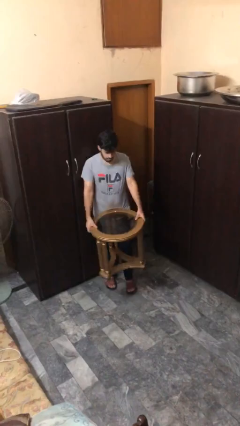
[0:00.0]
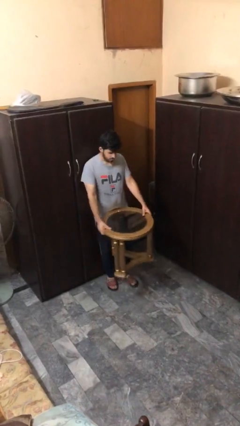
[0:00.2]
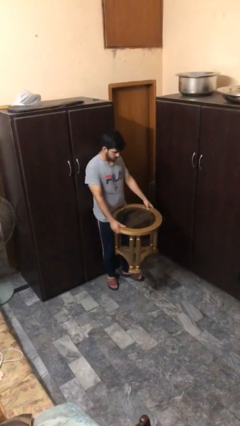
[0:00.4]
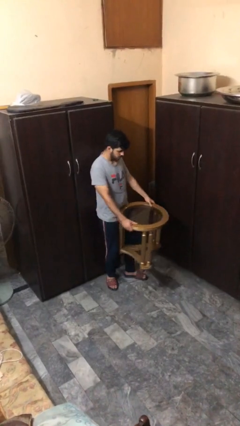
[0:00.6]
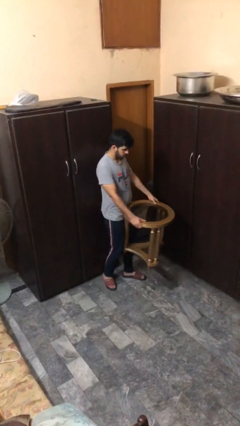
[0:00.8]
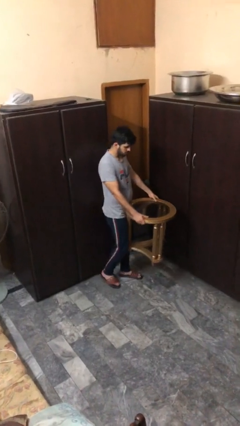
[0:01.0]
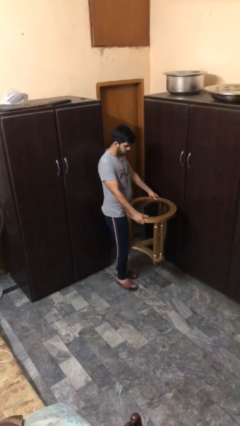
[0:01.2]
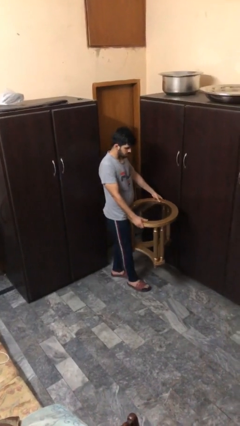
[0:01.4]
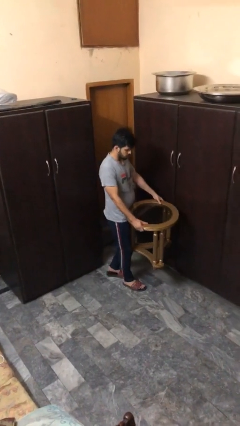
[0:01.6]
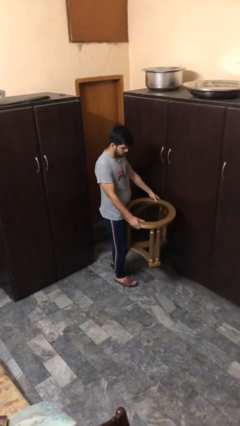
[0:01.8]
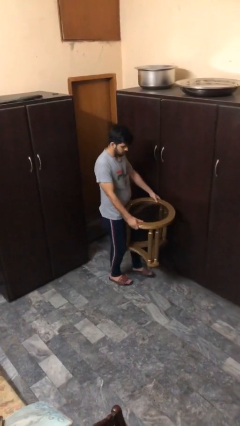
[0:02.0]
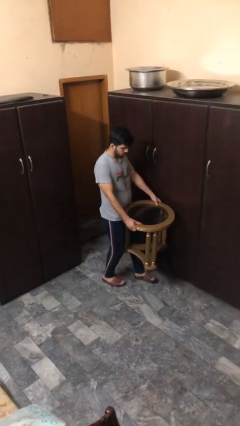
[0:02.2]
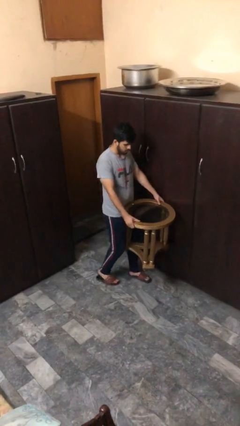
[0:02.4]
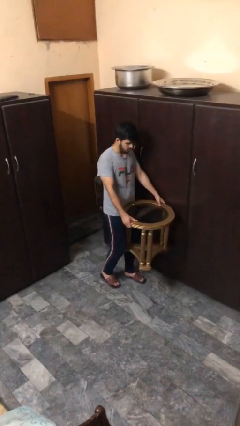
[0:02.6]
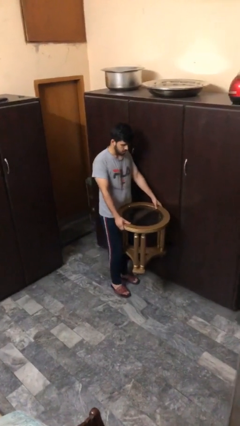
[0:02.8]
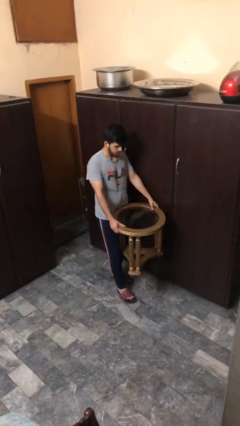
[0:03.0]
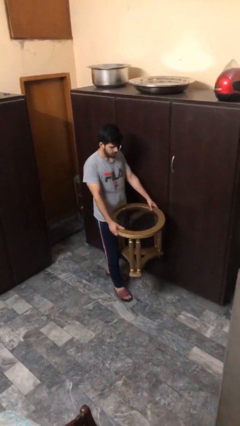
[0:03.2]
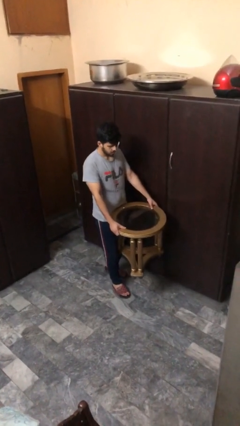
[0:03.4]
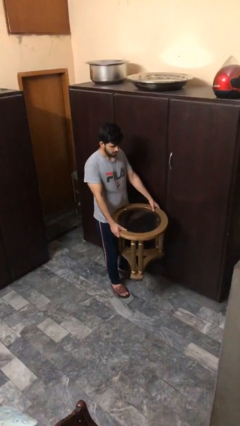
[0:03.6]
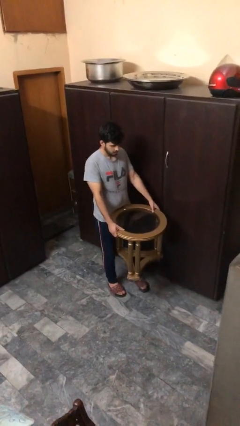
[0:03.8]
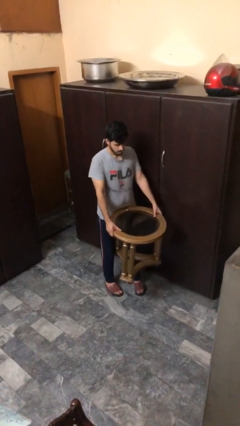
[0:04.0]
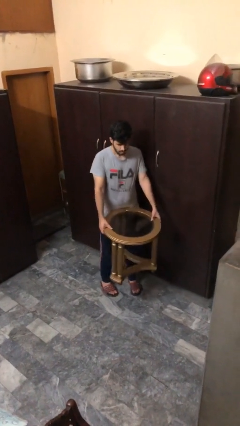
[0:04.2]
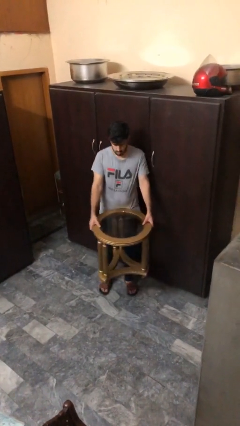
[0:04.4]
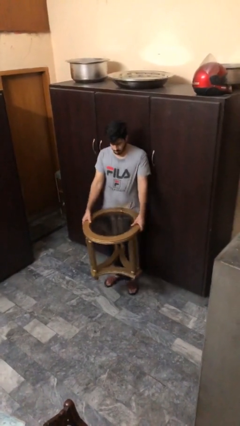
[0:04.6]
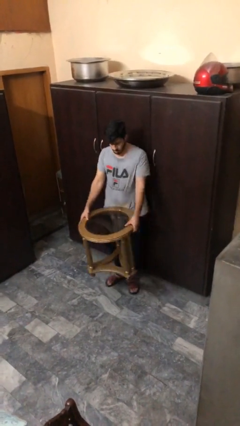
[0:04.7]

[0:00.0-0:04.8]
person carries furniture

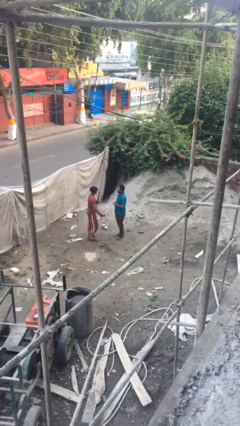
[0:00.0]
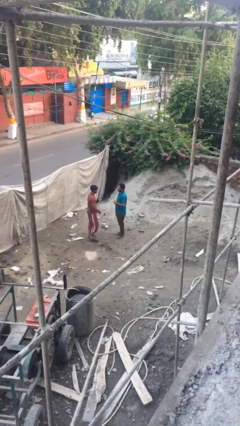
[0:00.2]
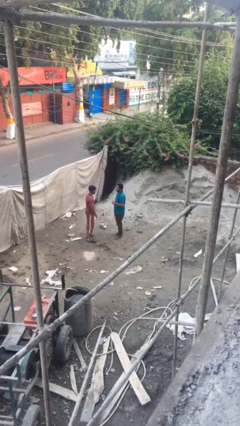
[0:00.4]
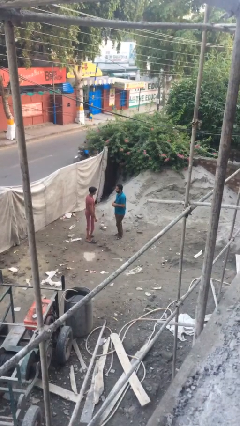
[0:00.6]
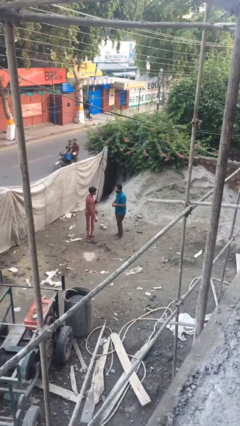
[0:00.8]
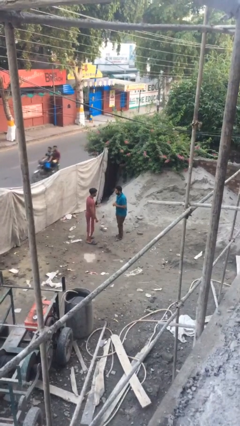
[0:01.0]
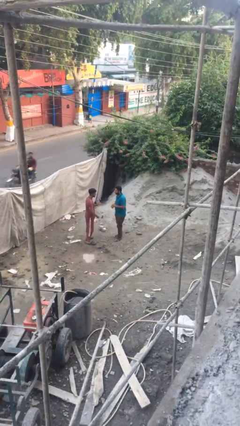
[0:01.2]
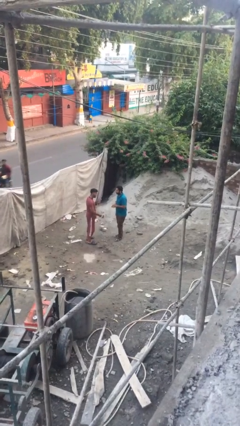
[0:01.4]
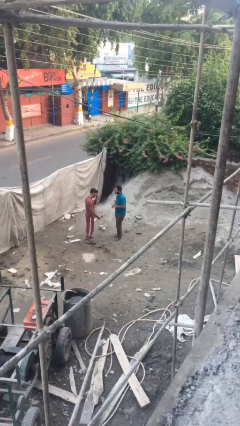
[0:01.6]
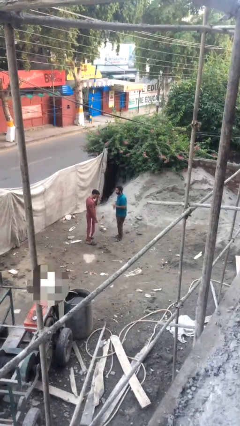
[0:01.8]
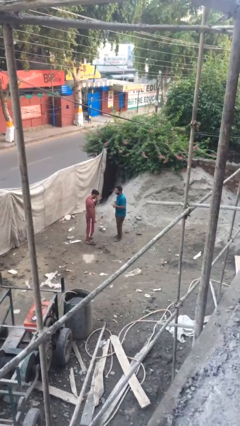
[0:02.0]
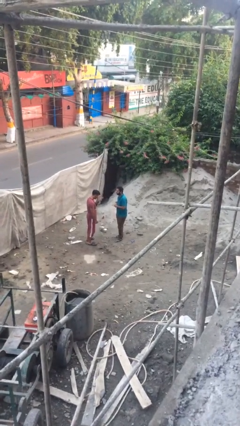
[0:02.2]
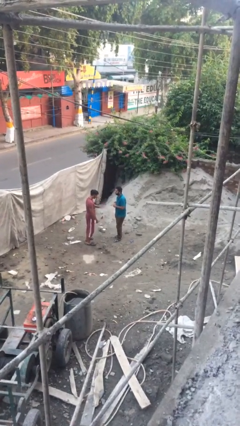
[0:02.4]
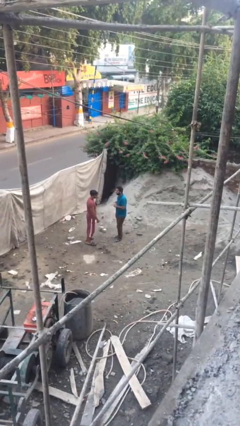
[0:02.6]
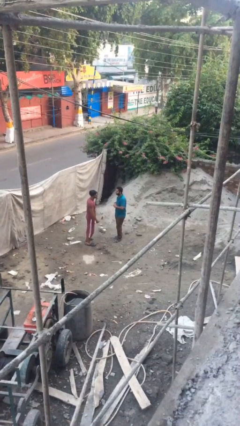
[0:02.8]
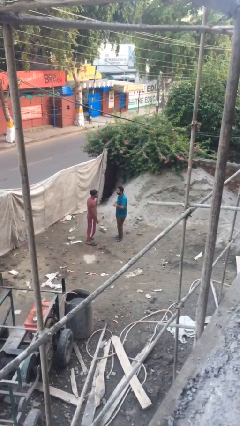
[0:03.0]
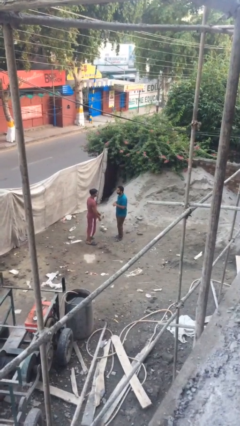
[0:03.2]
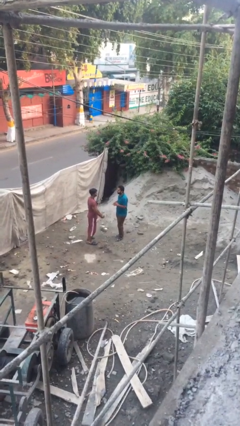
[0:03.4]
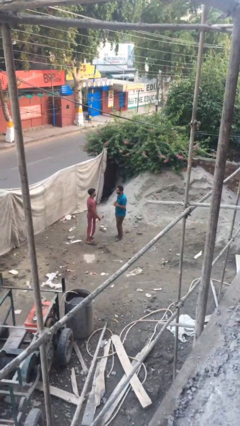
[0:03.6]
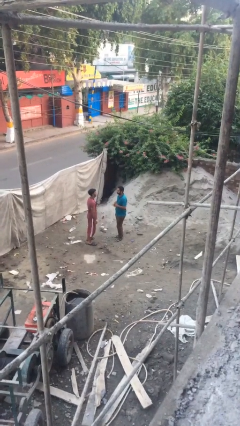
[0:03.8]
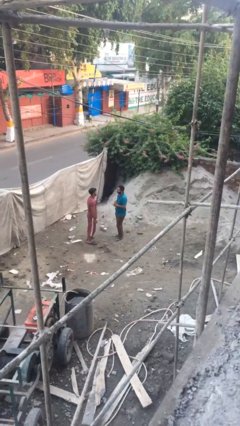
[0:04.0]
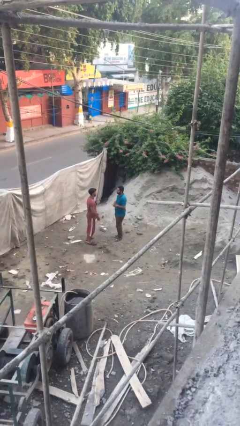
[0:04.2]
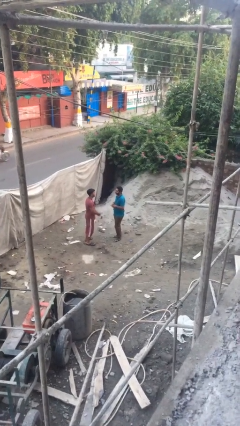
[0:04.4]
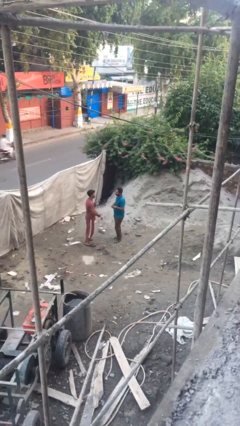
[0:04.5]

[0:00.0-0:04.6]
person talks to person

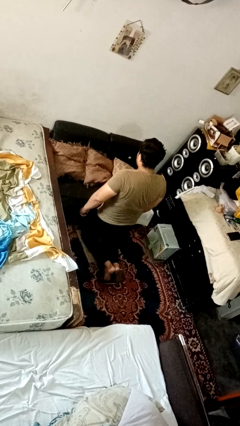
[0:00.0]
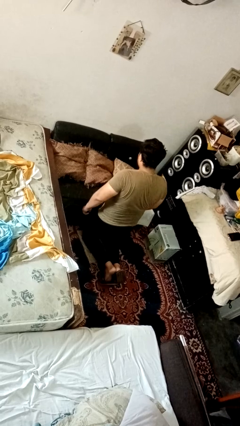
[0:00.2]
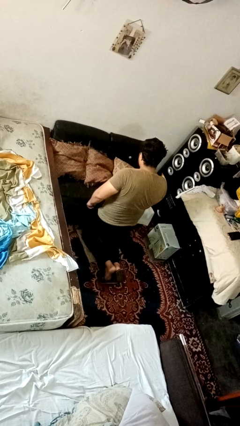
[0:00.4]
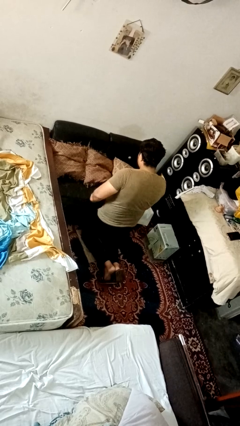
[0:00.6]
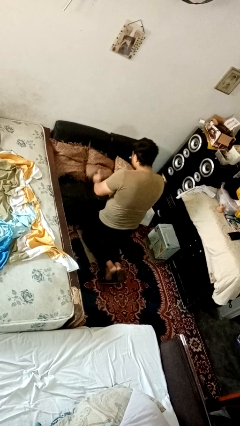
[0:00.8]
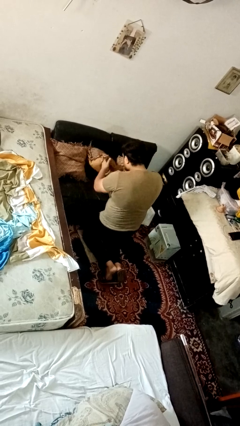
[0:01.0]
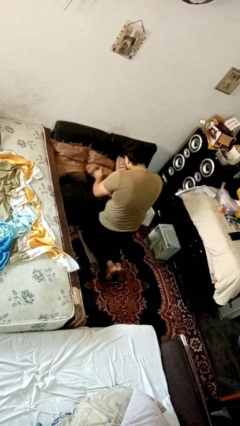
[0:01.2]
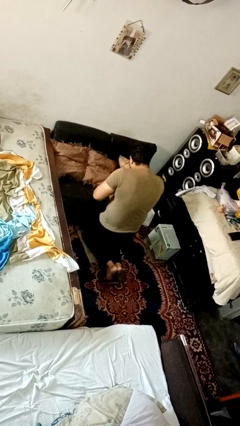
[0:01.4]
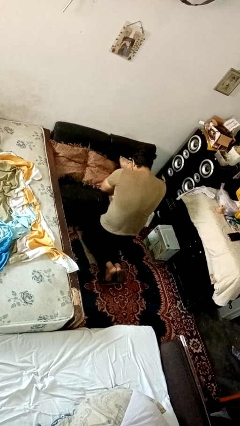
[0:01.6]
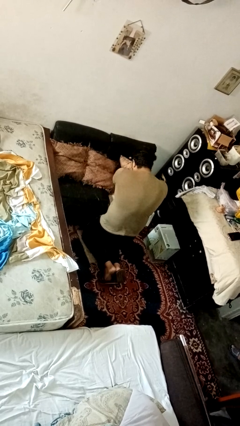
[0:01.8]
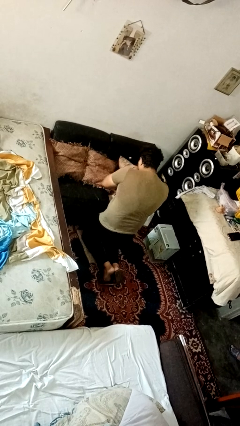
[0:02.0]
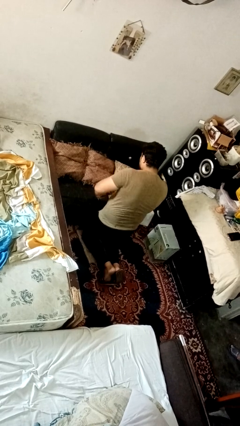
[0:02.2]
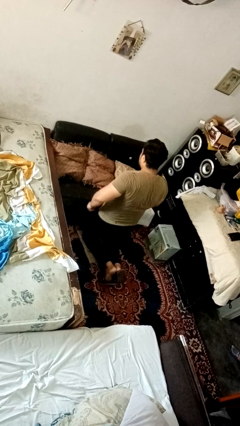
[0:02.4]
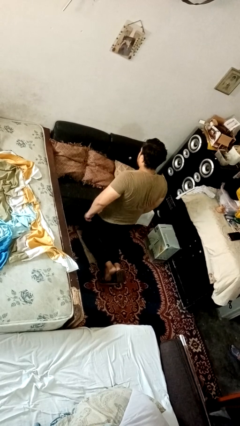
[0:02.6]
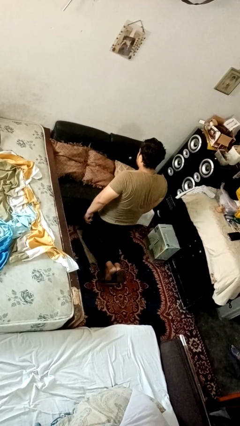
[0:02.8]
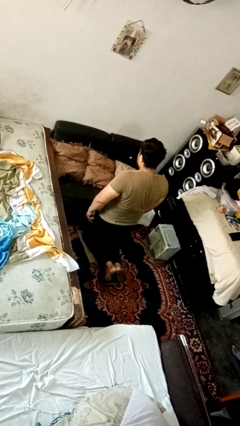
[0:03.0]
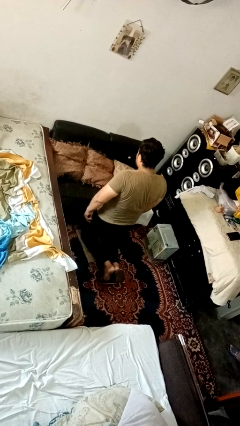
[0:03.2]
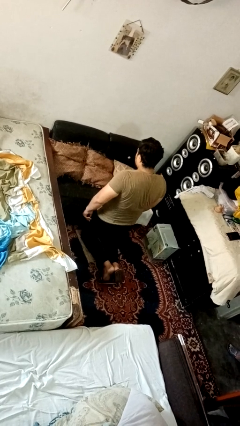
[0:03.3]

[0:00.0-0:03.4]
person searches in couch

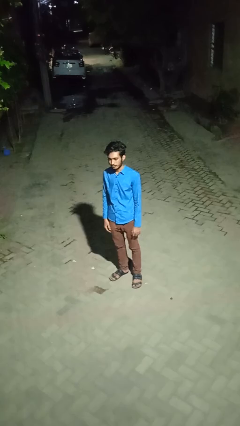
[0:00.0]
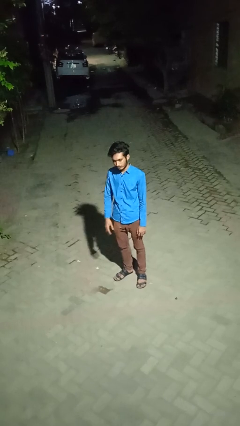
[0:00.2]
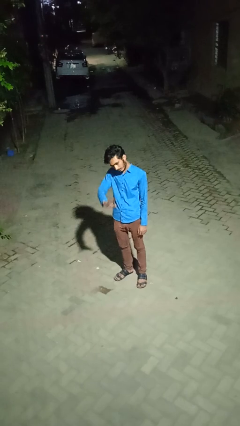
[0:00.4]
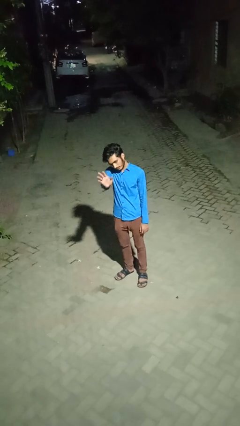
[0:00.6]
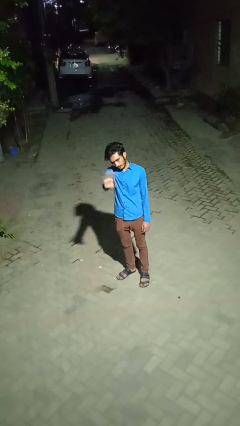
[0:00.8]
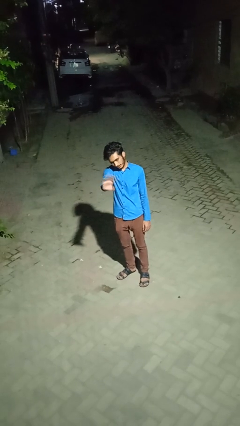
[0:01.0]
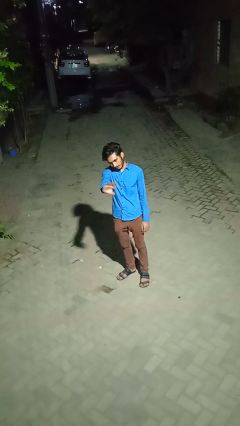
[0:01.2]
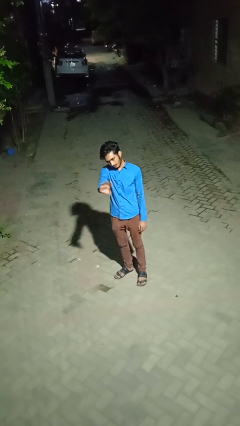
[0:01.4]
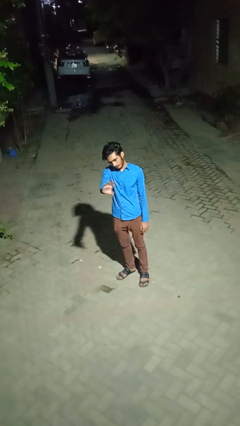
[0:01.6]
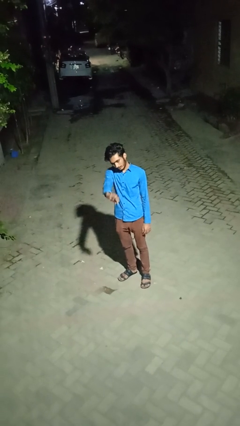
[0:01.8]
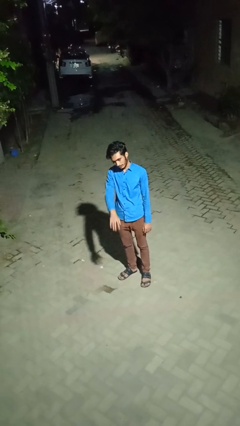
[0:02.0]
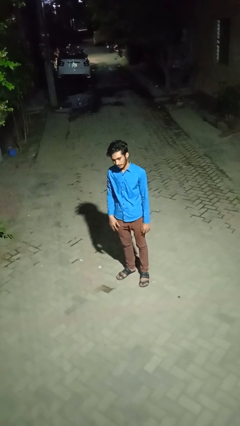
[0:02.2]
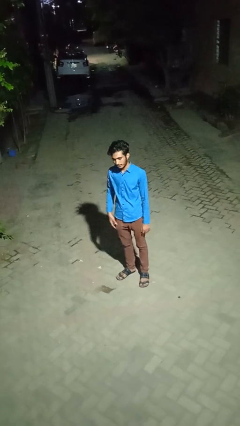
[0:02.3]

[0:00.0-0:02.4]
person waves at person
